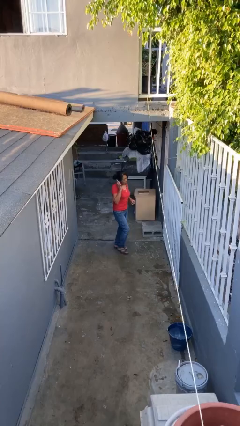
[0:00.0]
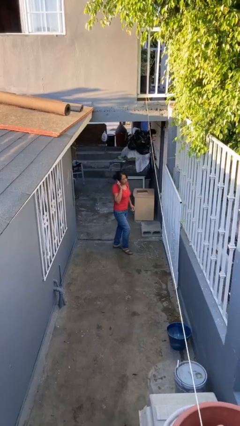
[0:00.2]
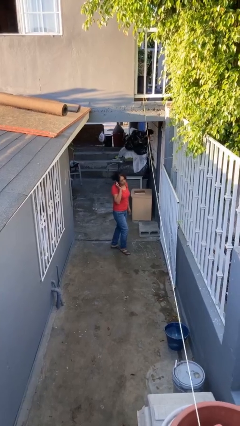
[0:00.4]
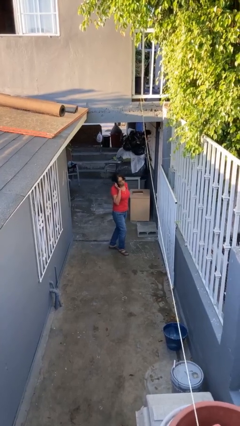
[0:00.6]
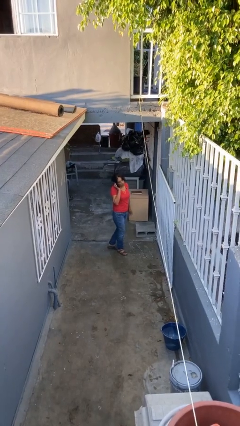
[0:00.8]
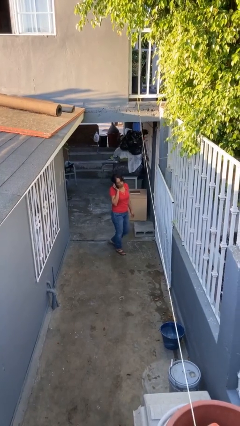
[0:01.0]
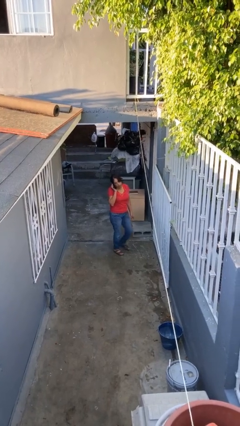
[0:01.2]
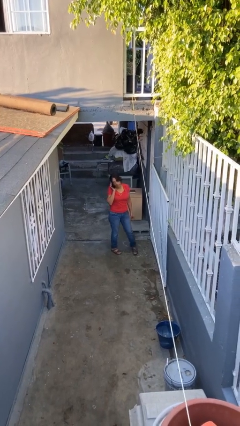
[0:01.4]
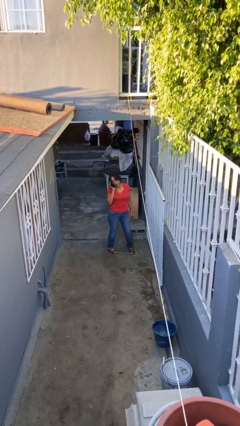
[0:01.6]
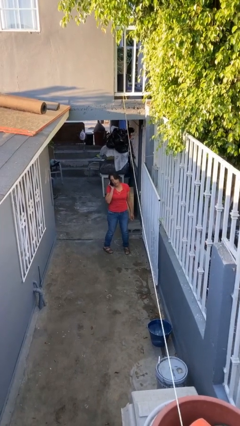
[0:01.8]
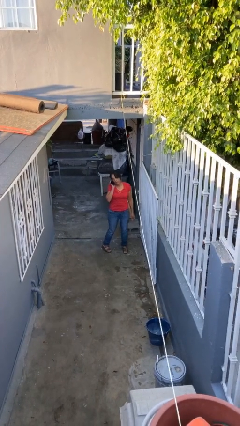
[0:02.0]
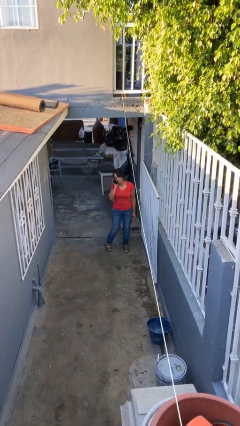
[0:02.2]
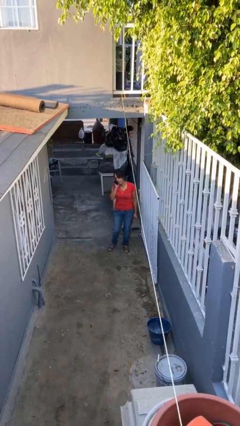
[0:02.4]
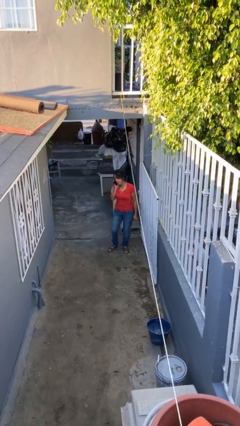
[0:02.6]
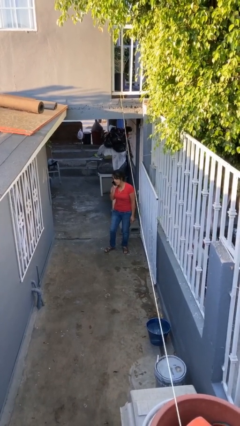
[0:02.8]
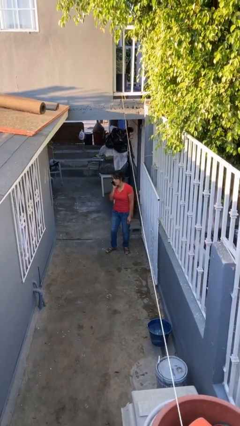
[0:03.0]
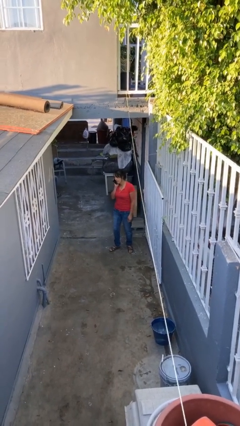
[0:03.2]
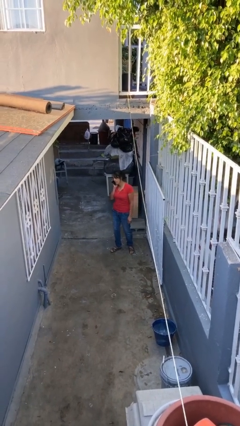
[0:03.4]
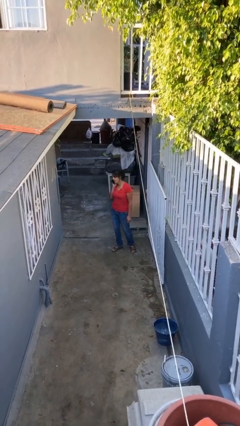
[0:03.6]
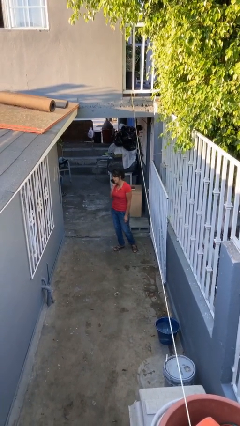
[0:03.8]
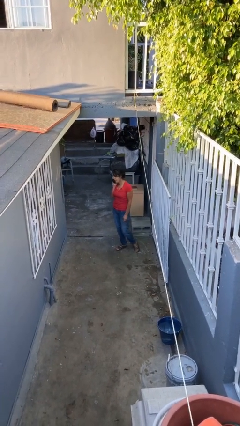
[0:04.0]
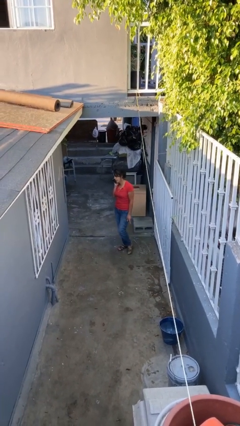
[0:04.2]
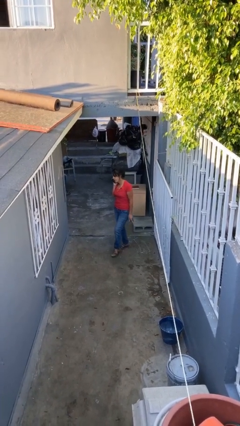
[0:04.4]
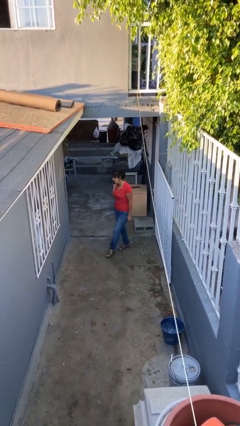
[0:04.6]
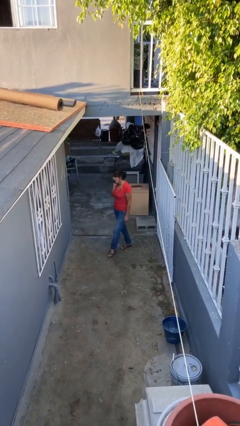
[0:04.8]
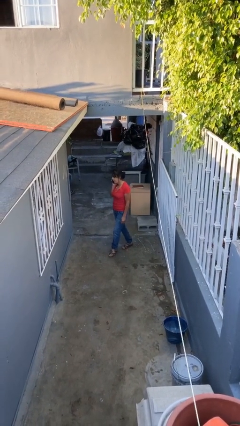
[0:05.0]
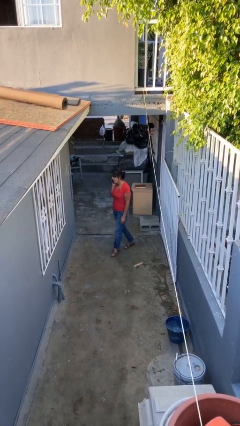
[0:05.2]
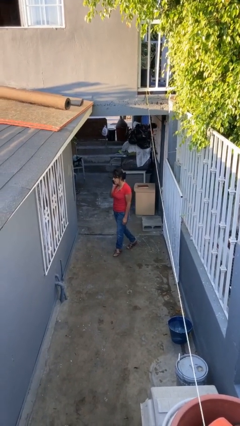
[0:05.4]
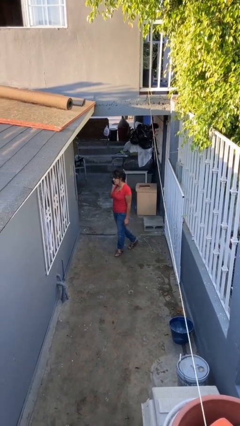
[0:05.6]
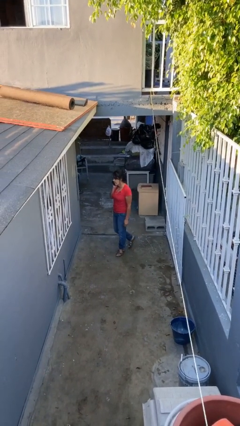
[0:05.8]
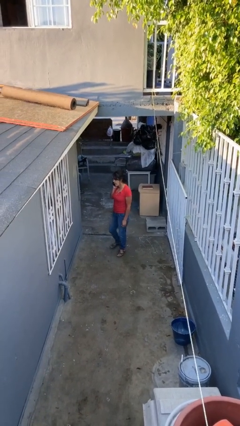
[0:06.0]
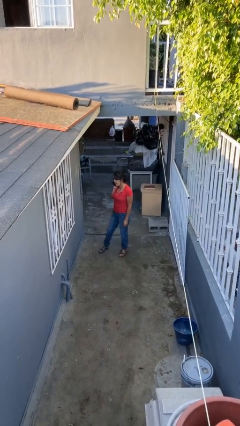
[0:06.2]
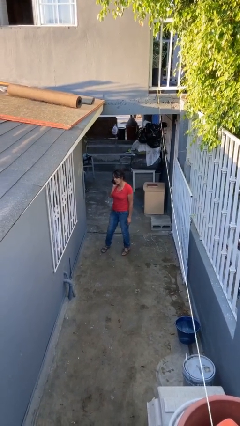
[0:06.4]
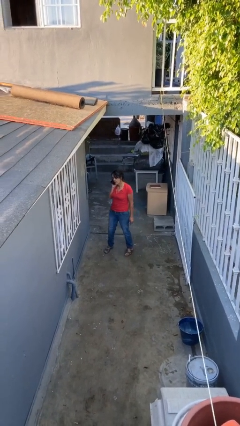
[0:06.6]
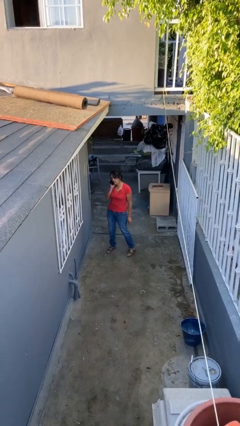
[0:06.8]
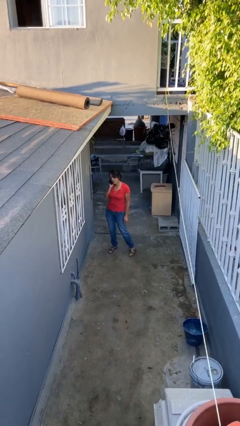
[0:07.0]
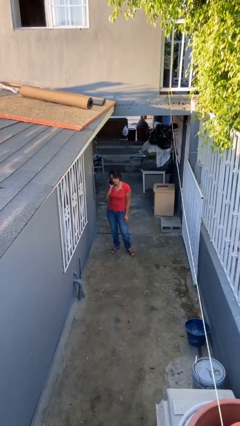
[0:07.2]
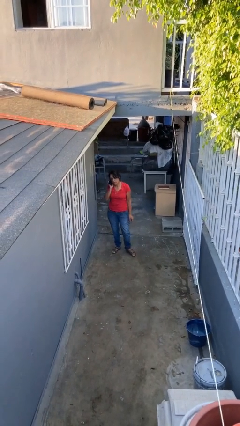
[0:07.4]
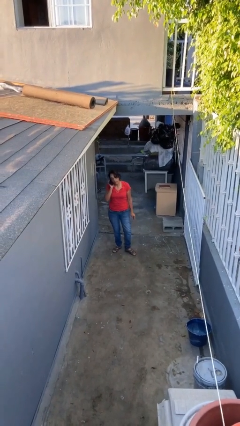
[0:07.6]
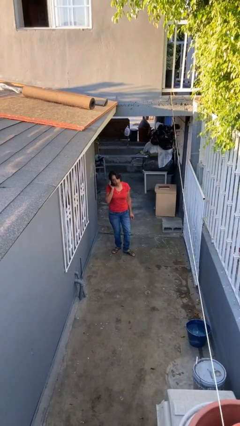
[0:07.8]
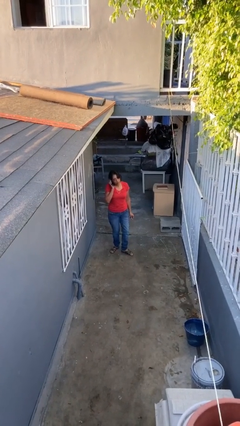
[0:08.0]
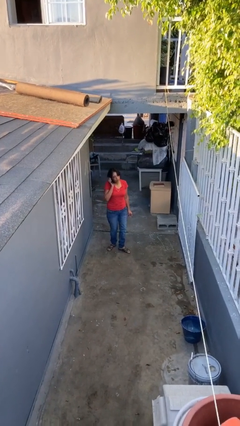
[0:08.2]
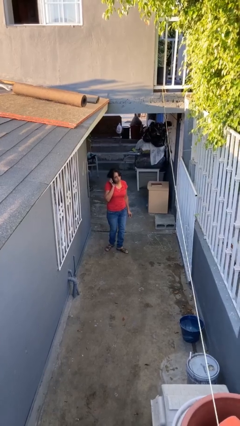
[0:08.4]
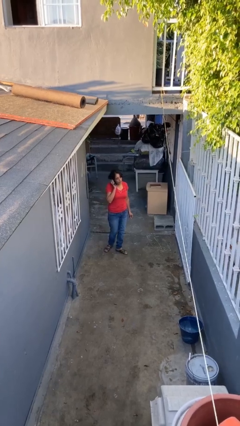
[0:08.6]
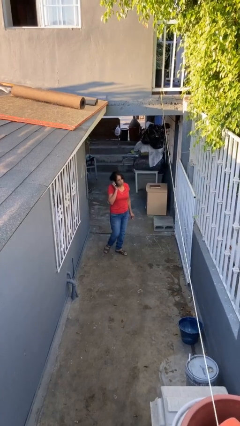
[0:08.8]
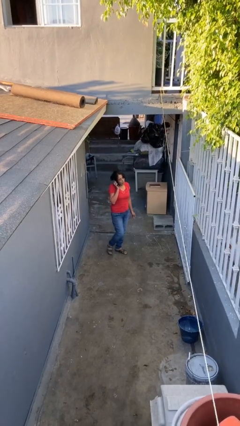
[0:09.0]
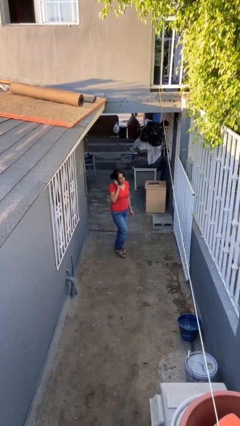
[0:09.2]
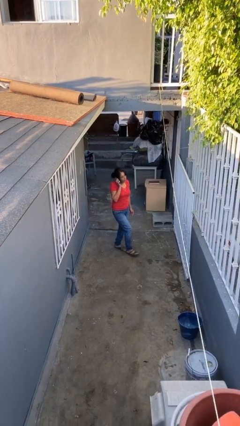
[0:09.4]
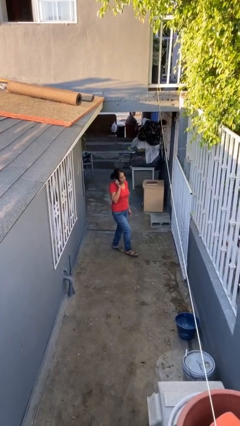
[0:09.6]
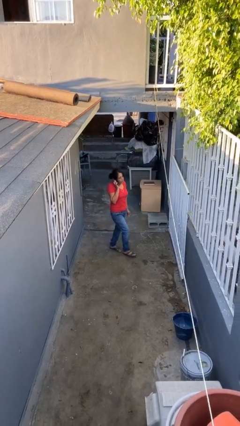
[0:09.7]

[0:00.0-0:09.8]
person talks on phone

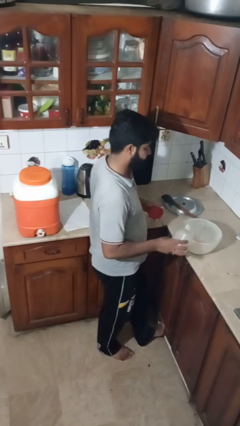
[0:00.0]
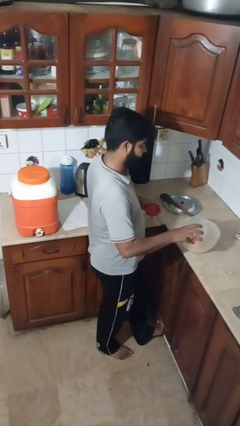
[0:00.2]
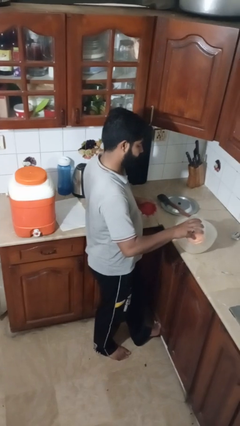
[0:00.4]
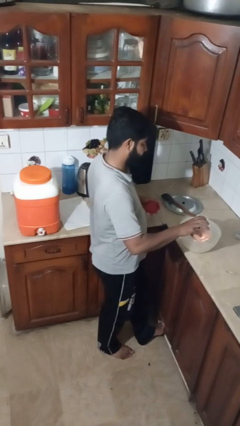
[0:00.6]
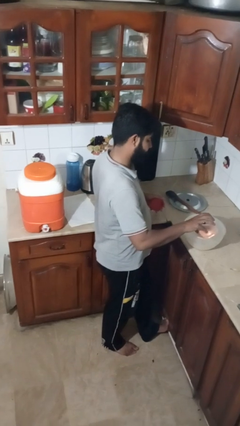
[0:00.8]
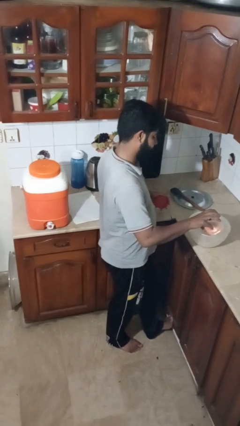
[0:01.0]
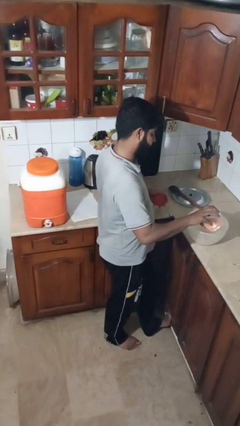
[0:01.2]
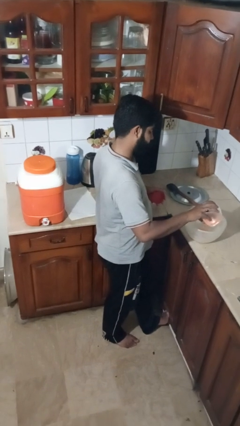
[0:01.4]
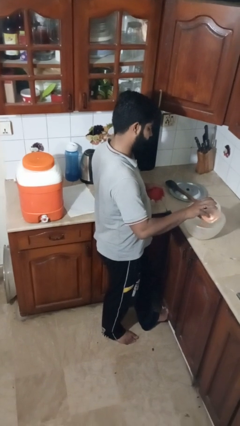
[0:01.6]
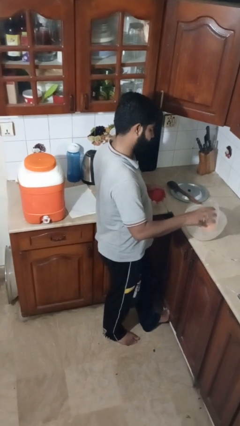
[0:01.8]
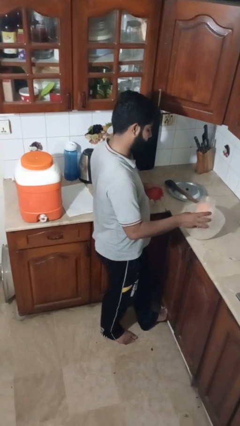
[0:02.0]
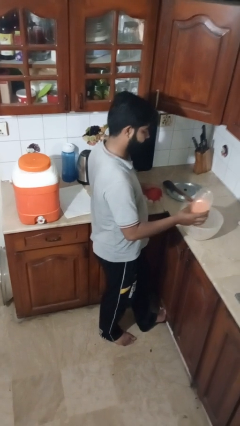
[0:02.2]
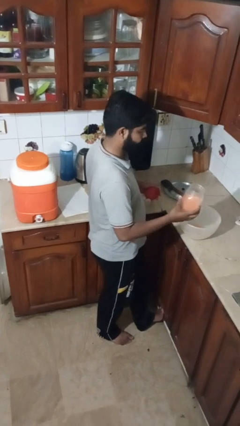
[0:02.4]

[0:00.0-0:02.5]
person pours into bowl

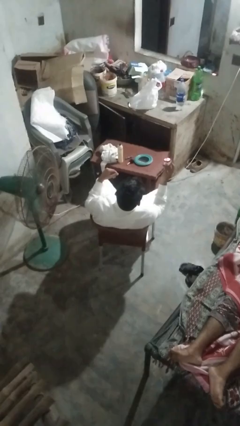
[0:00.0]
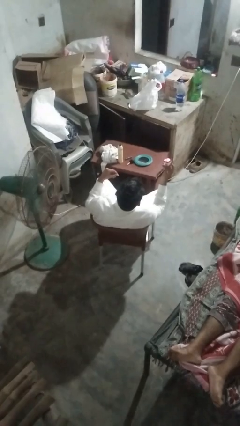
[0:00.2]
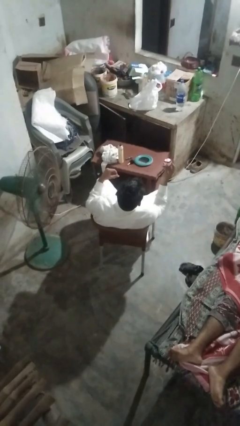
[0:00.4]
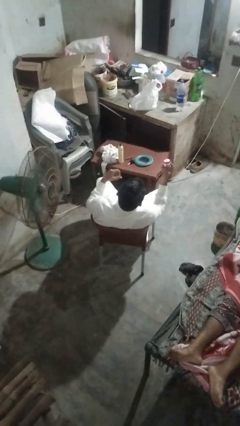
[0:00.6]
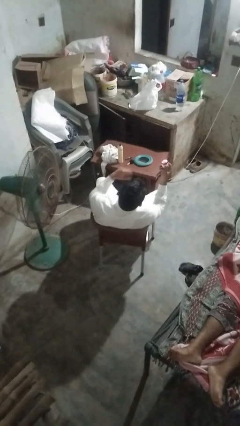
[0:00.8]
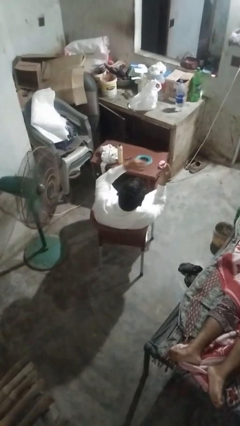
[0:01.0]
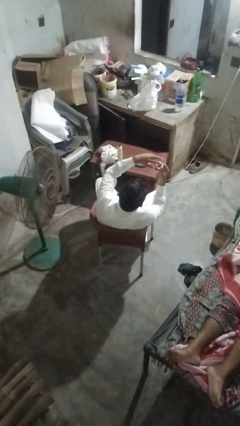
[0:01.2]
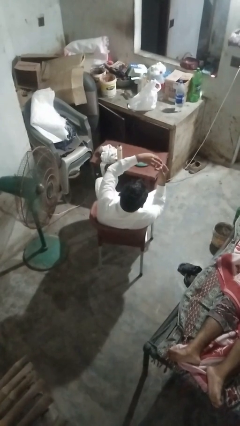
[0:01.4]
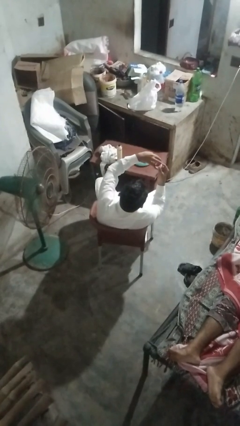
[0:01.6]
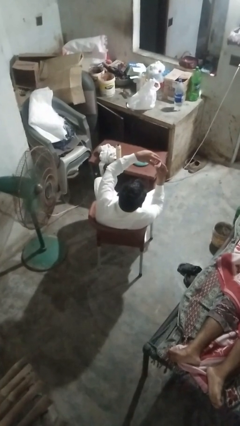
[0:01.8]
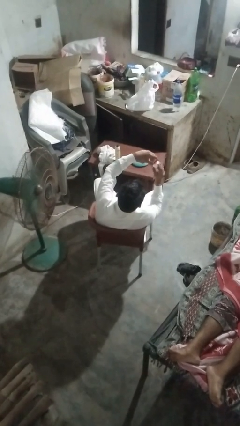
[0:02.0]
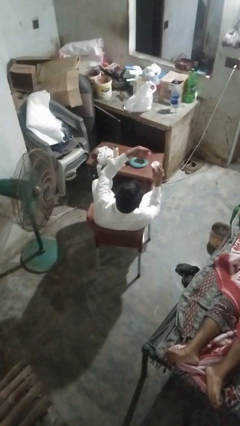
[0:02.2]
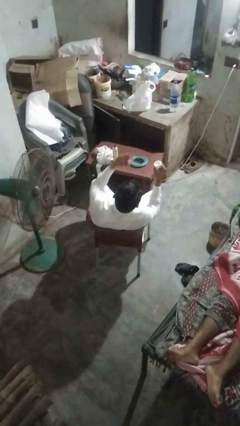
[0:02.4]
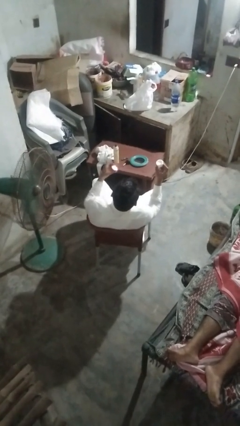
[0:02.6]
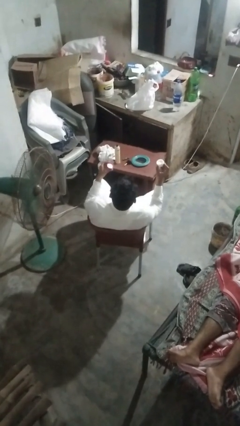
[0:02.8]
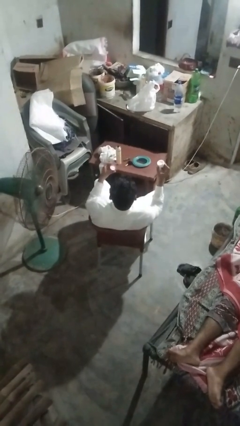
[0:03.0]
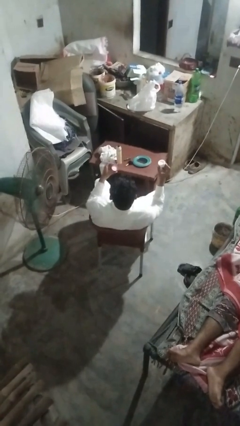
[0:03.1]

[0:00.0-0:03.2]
person opens jar

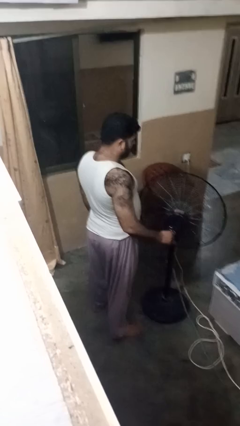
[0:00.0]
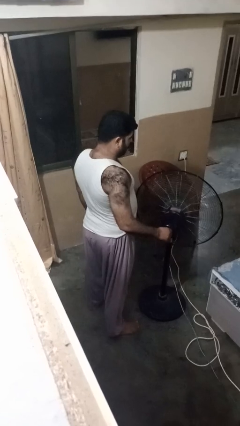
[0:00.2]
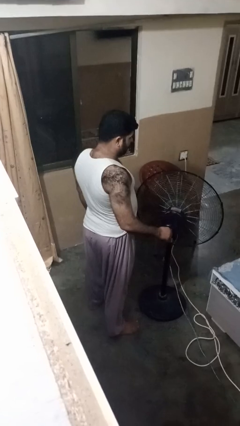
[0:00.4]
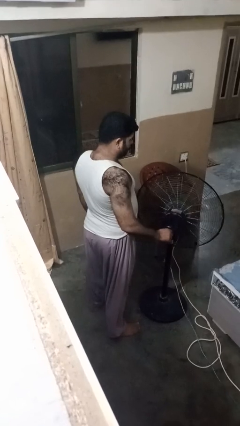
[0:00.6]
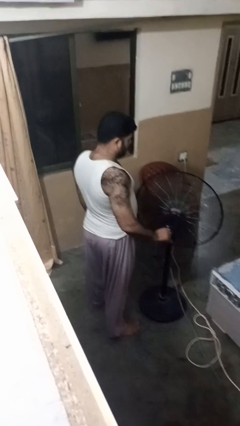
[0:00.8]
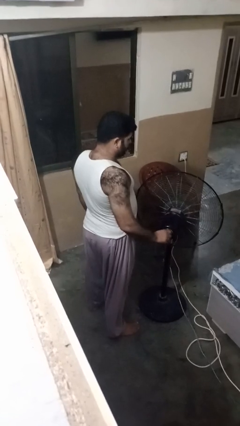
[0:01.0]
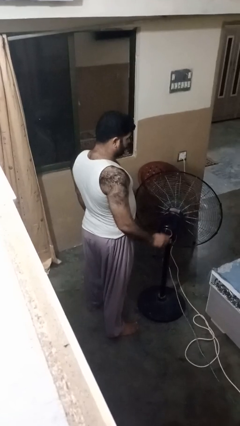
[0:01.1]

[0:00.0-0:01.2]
person turns off fan

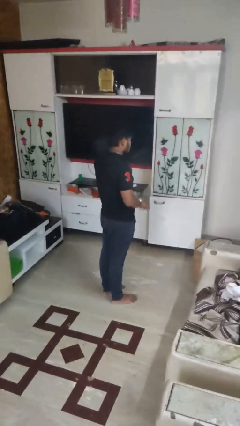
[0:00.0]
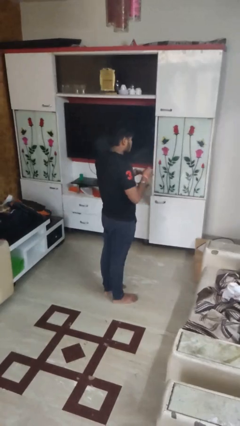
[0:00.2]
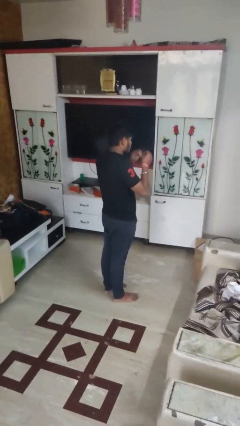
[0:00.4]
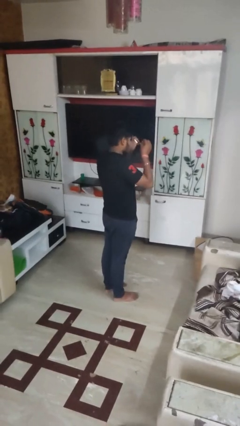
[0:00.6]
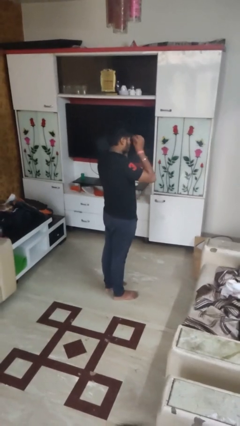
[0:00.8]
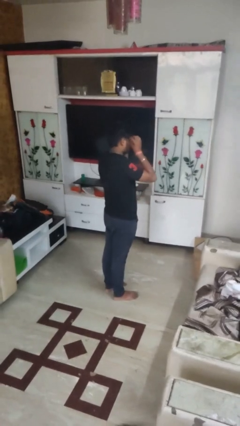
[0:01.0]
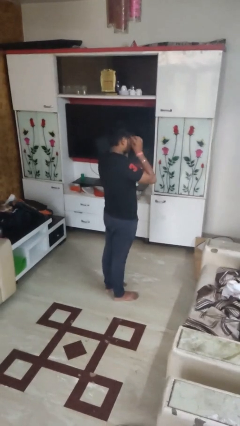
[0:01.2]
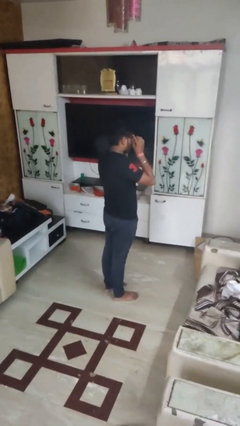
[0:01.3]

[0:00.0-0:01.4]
person puts on glasses
